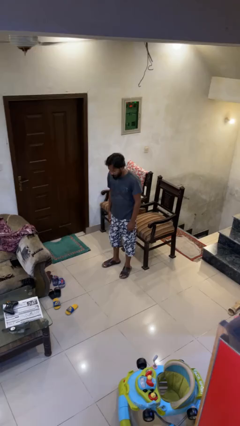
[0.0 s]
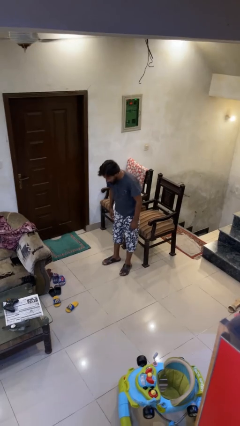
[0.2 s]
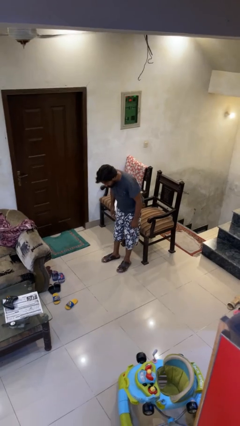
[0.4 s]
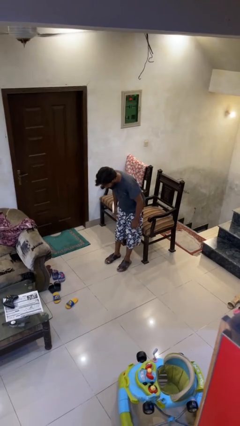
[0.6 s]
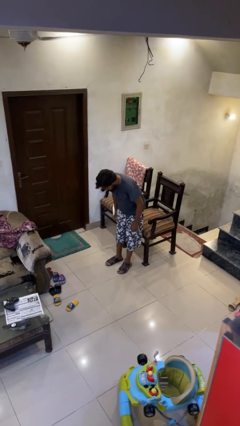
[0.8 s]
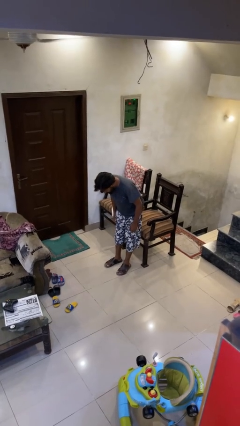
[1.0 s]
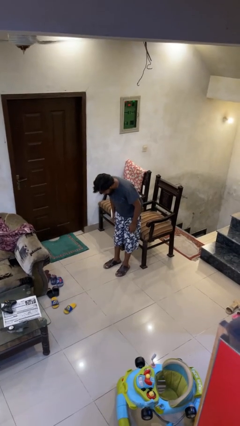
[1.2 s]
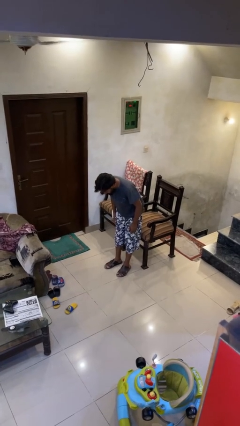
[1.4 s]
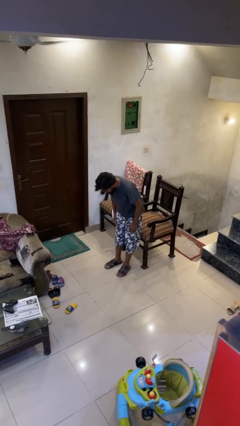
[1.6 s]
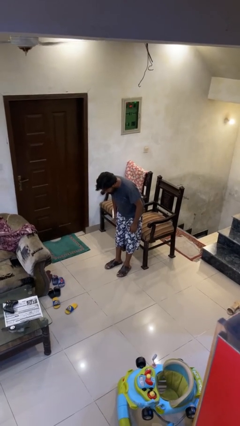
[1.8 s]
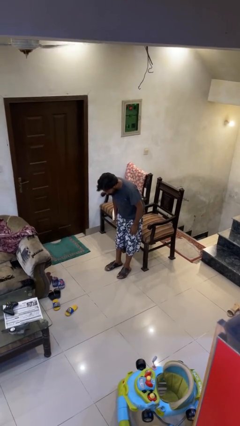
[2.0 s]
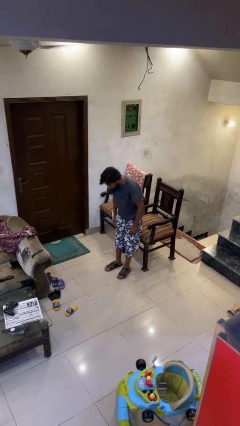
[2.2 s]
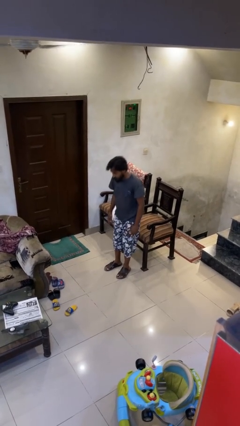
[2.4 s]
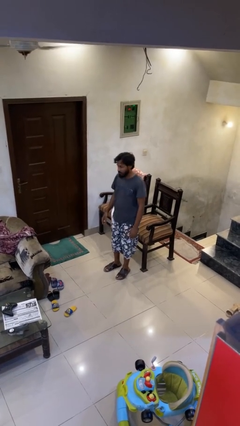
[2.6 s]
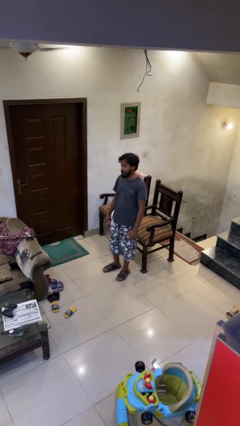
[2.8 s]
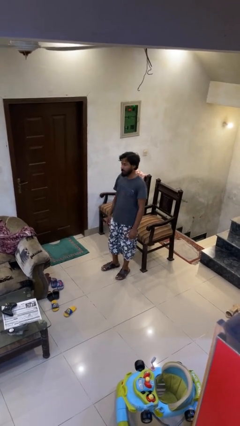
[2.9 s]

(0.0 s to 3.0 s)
person bows

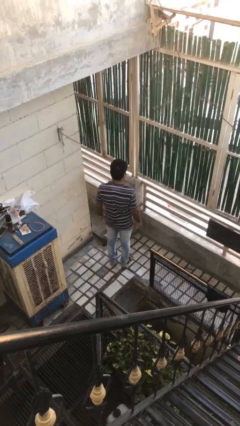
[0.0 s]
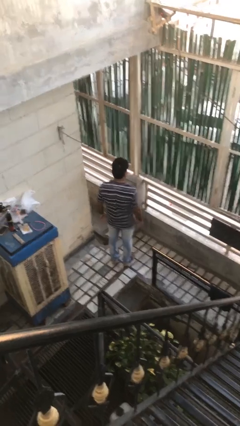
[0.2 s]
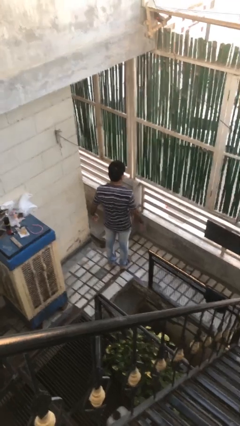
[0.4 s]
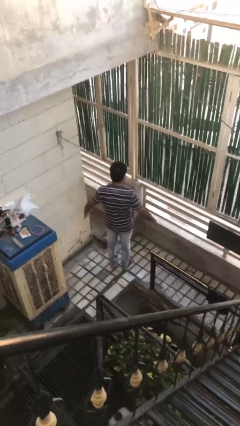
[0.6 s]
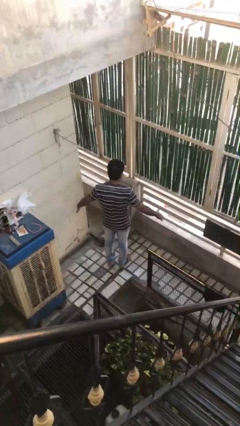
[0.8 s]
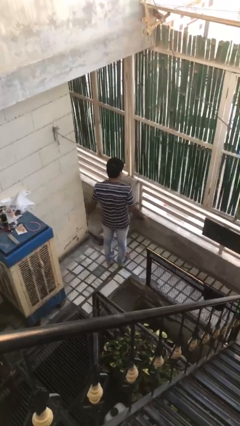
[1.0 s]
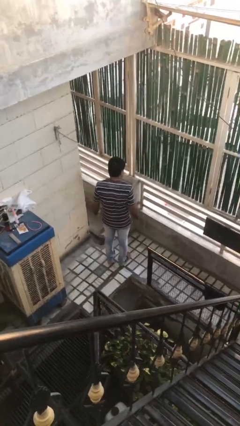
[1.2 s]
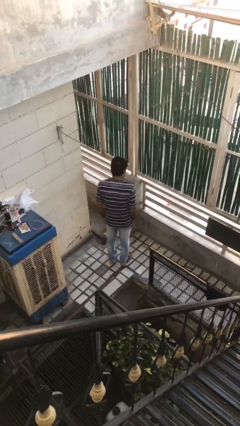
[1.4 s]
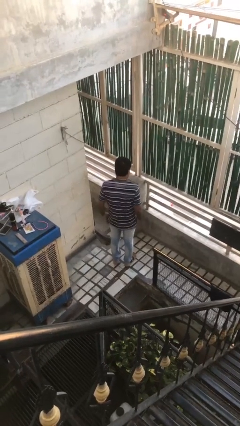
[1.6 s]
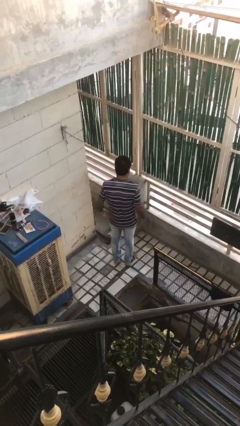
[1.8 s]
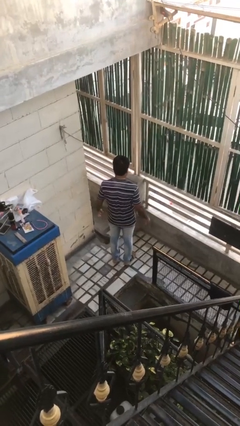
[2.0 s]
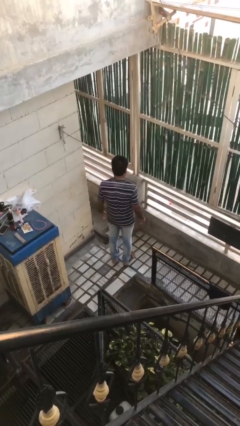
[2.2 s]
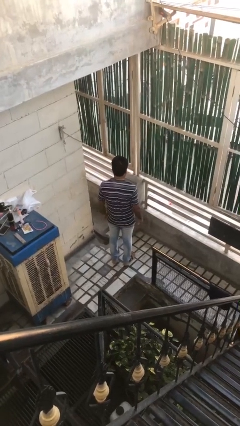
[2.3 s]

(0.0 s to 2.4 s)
person slaps hands on thighs

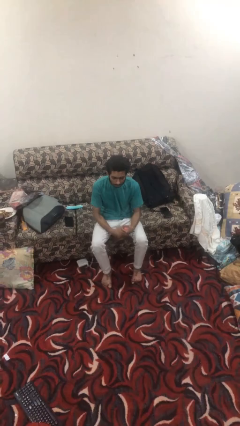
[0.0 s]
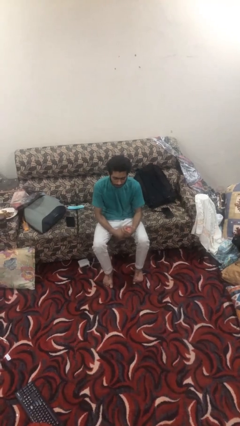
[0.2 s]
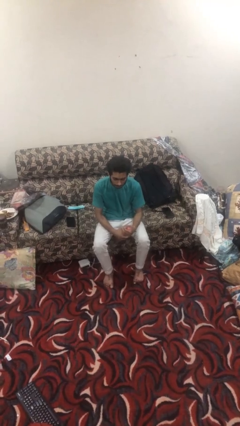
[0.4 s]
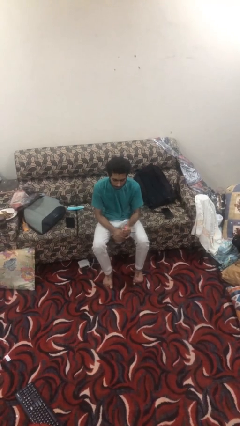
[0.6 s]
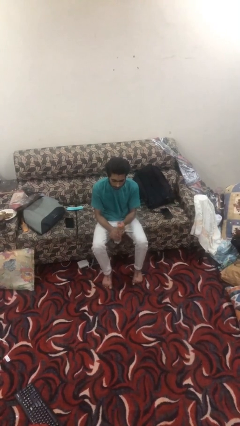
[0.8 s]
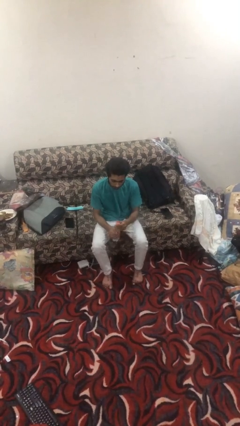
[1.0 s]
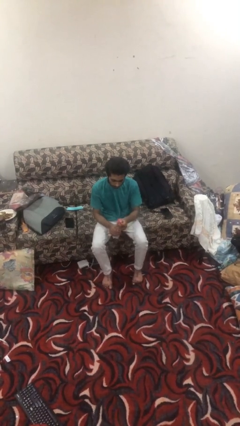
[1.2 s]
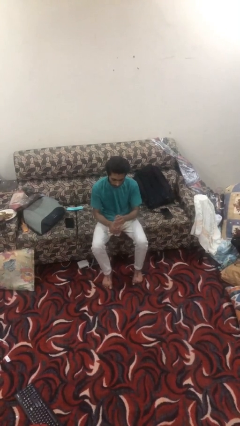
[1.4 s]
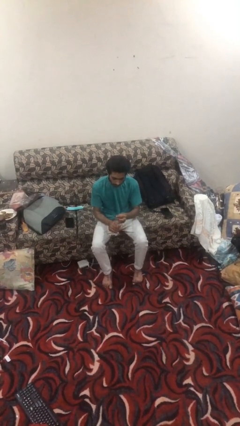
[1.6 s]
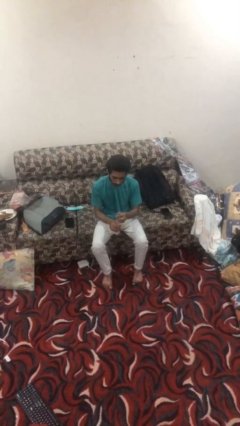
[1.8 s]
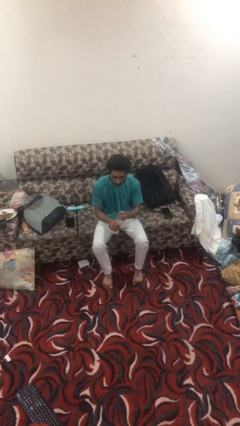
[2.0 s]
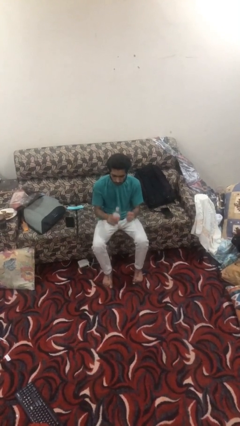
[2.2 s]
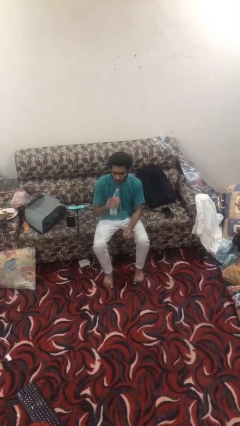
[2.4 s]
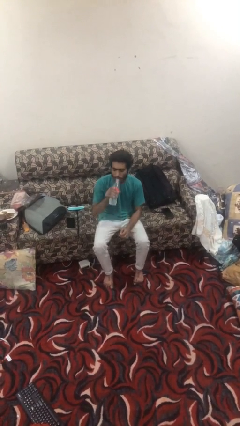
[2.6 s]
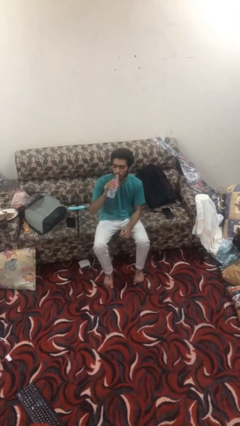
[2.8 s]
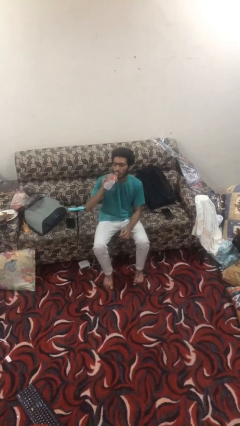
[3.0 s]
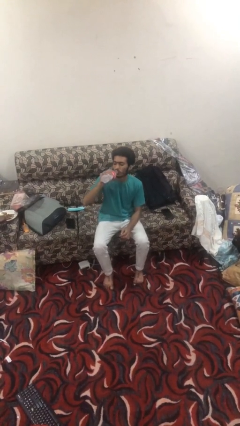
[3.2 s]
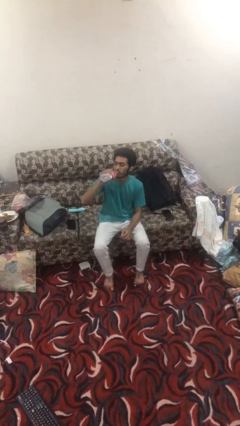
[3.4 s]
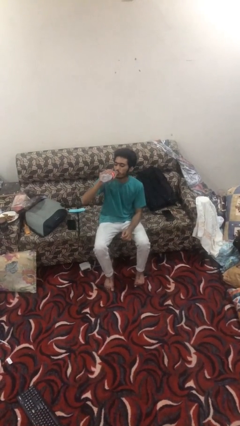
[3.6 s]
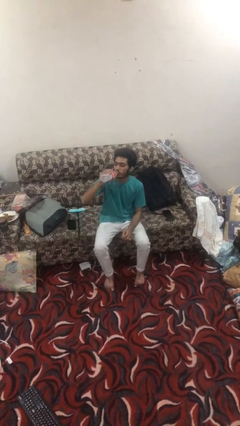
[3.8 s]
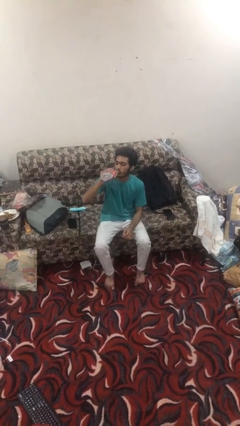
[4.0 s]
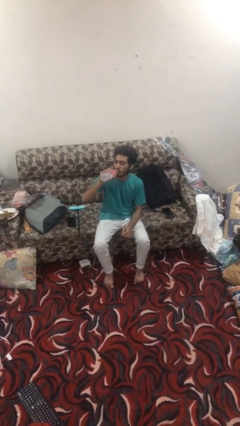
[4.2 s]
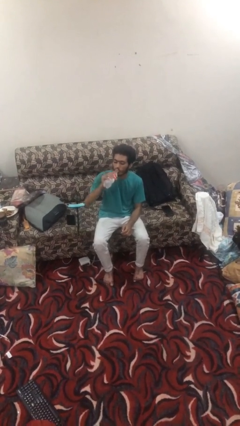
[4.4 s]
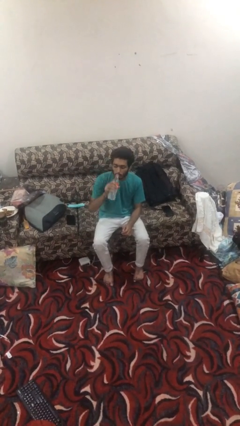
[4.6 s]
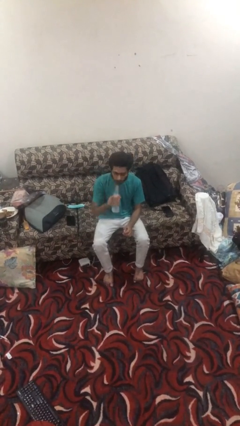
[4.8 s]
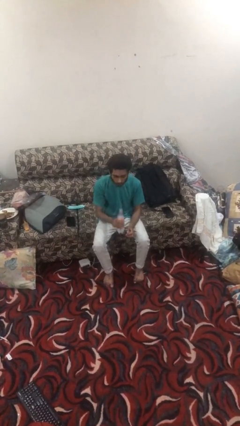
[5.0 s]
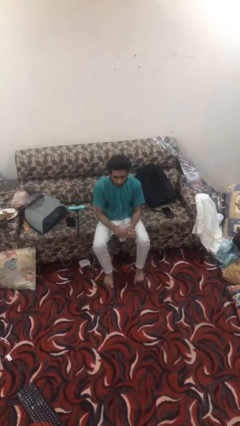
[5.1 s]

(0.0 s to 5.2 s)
person drinks from bottle

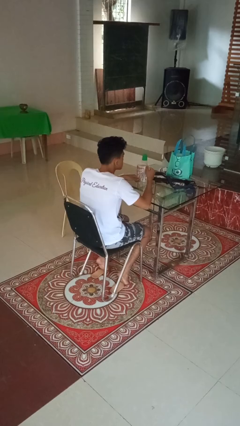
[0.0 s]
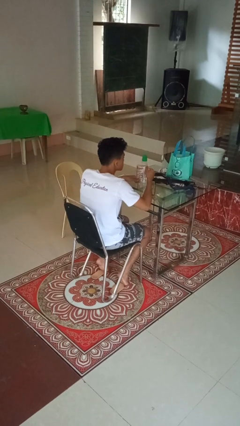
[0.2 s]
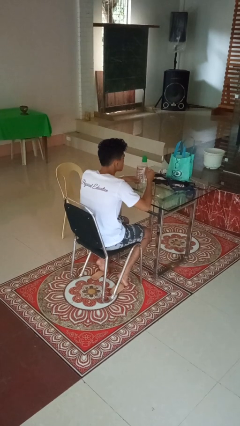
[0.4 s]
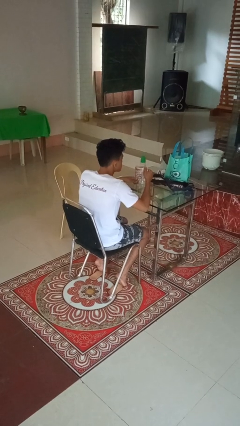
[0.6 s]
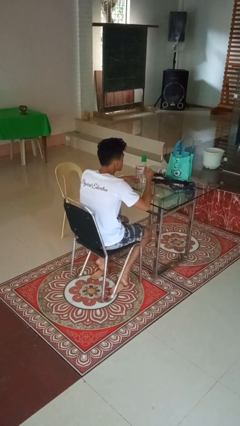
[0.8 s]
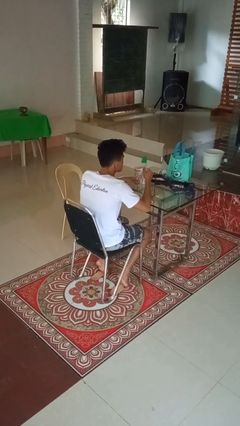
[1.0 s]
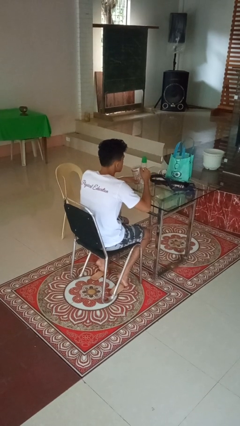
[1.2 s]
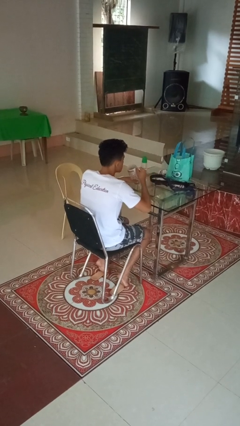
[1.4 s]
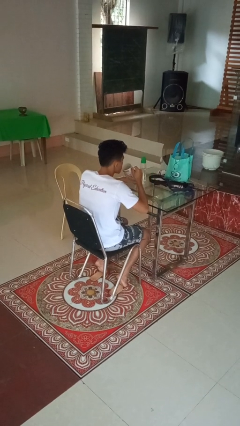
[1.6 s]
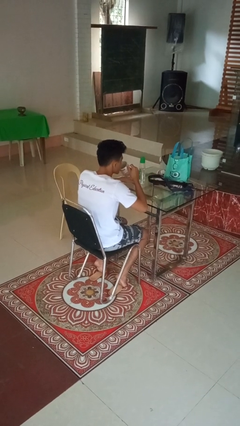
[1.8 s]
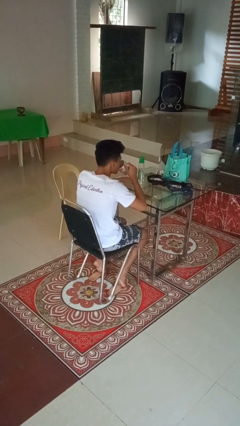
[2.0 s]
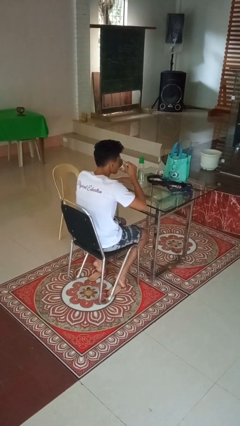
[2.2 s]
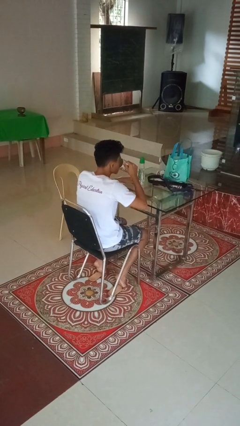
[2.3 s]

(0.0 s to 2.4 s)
person picks up object from table

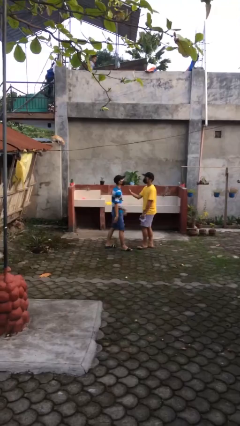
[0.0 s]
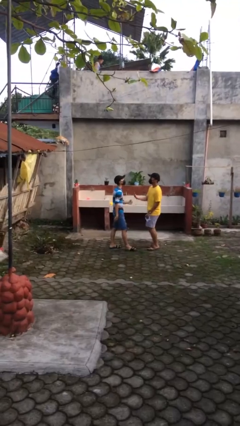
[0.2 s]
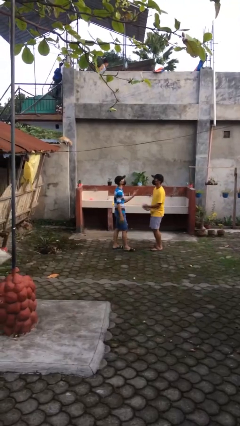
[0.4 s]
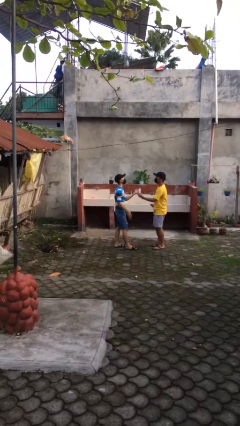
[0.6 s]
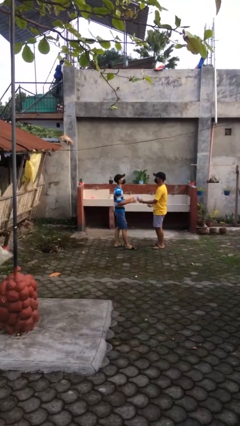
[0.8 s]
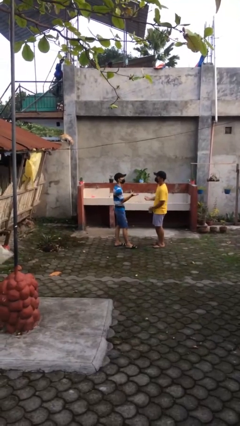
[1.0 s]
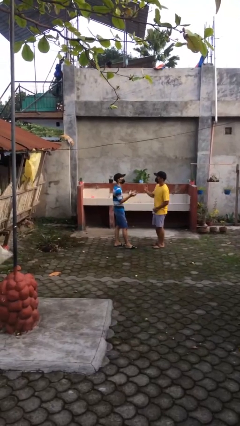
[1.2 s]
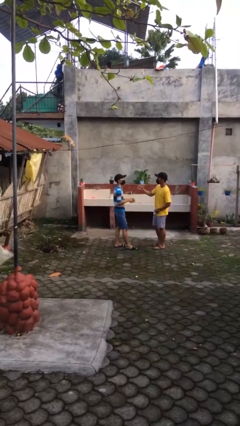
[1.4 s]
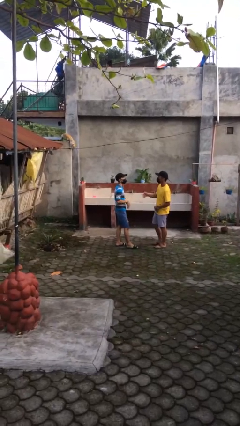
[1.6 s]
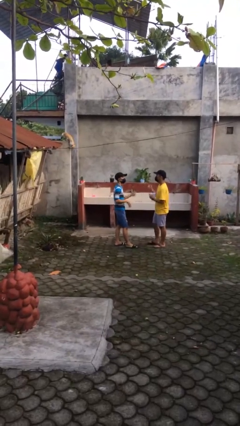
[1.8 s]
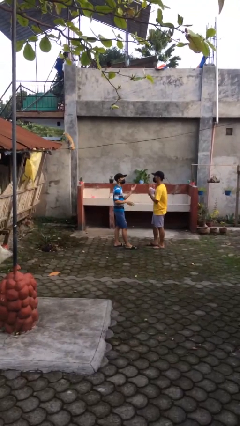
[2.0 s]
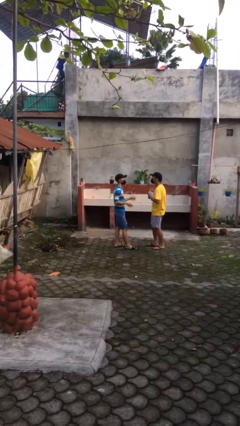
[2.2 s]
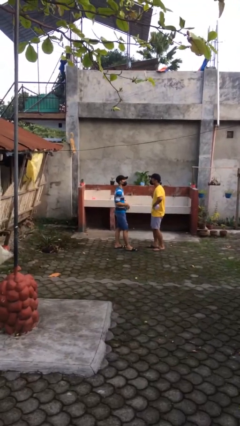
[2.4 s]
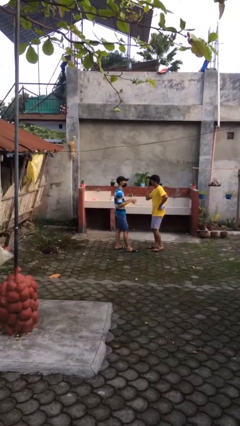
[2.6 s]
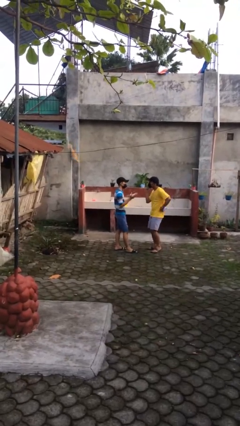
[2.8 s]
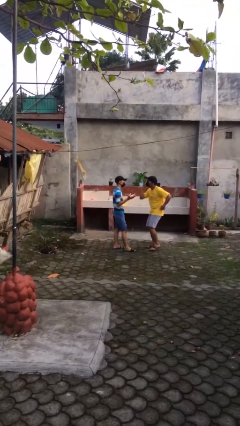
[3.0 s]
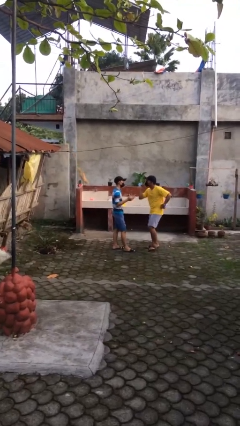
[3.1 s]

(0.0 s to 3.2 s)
person talks to person

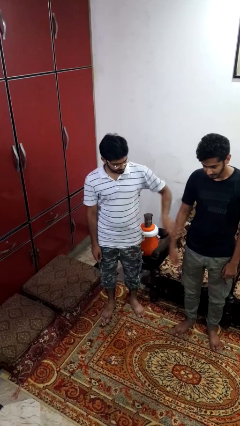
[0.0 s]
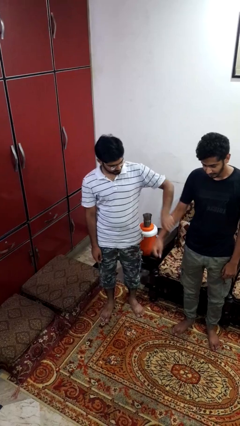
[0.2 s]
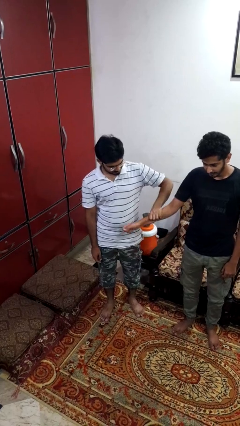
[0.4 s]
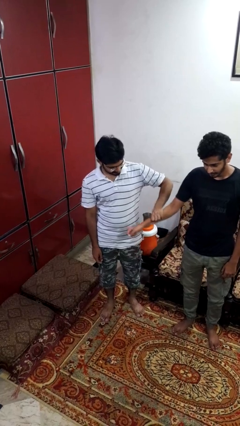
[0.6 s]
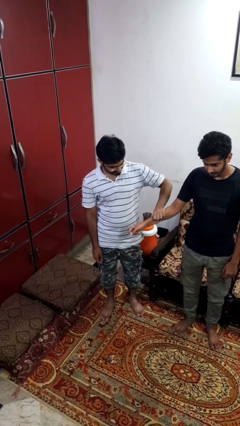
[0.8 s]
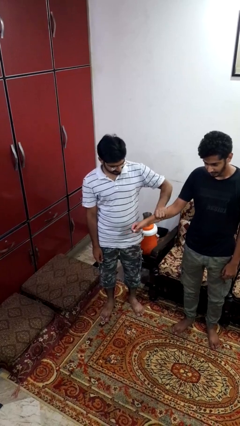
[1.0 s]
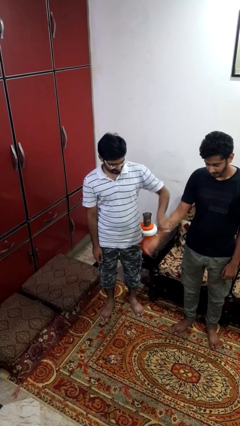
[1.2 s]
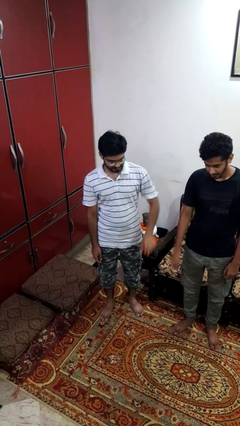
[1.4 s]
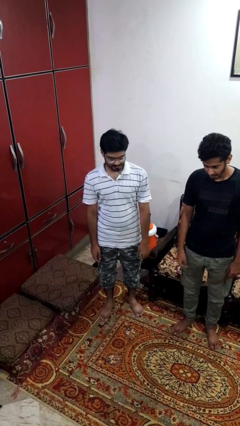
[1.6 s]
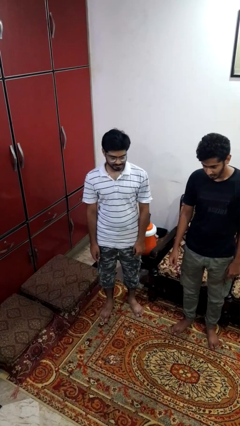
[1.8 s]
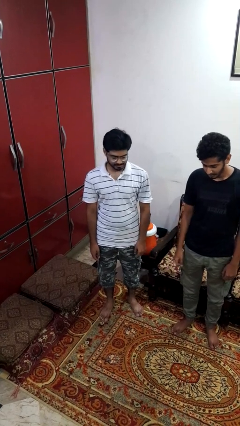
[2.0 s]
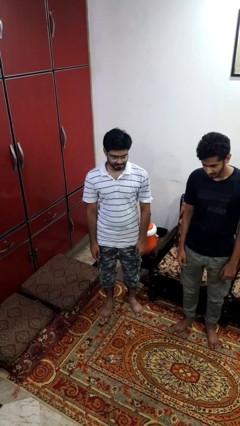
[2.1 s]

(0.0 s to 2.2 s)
person grabs person by forearm
